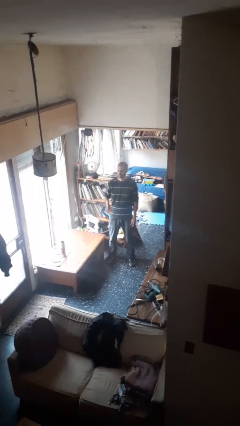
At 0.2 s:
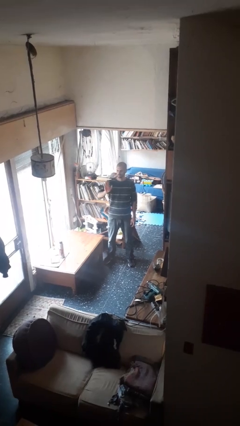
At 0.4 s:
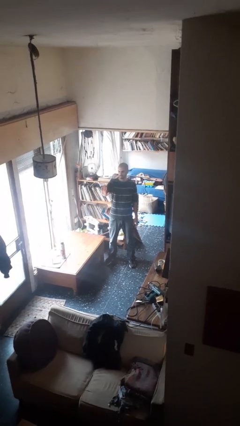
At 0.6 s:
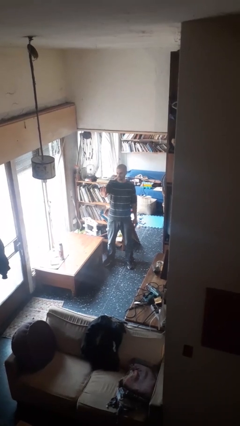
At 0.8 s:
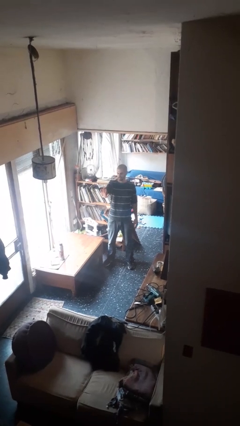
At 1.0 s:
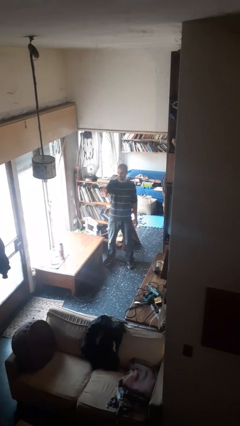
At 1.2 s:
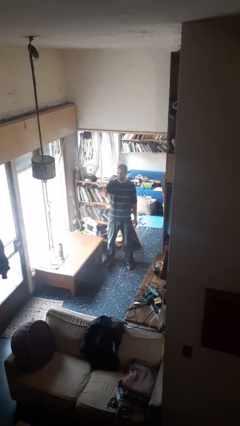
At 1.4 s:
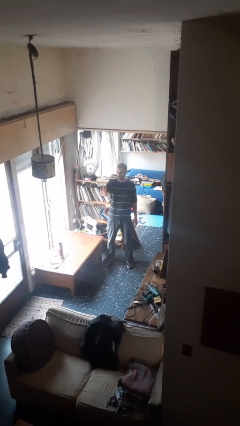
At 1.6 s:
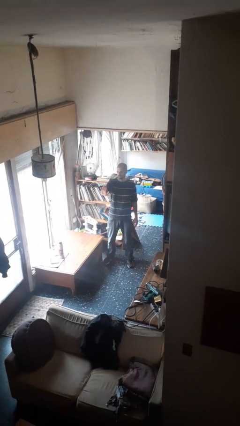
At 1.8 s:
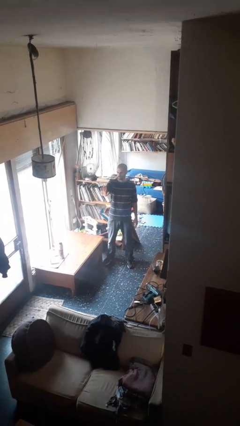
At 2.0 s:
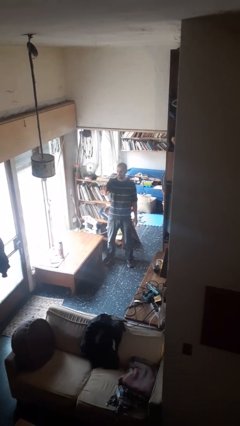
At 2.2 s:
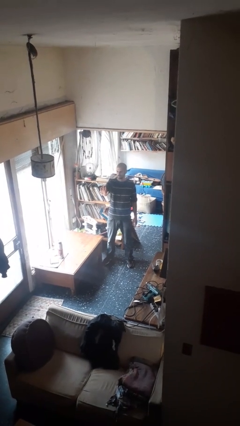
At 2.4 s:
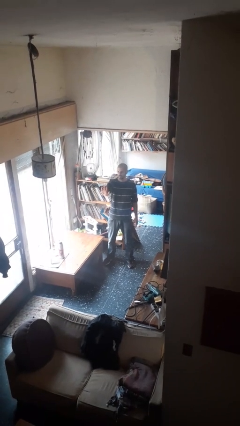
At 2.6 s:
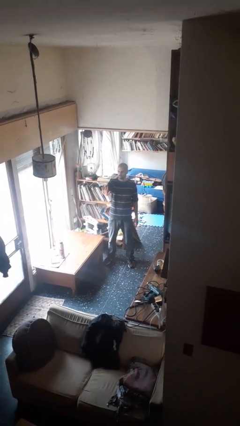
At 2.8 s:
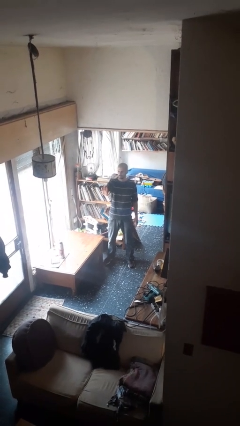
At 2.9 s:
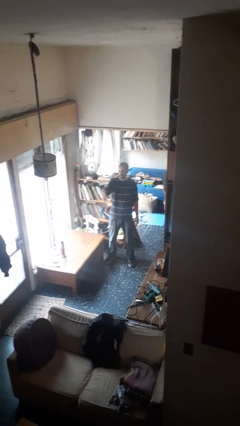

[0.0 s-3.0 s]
person gestures stop

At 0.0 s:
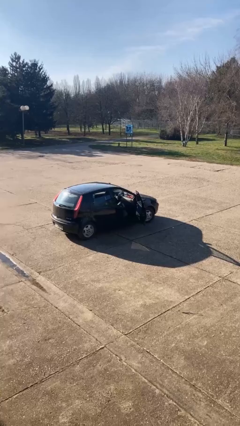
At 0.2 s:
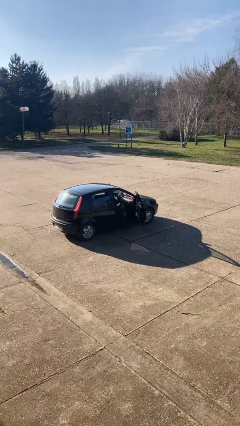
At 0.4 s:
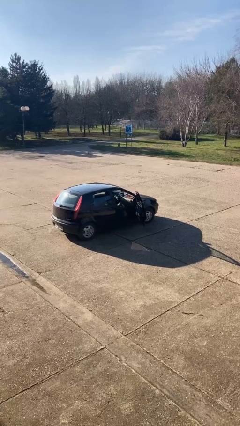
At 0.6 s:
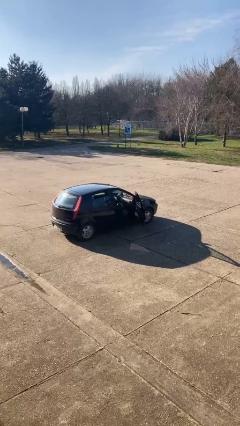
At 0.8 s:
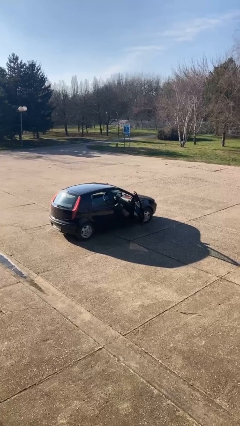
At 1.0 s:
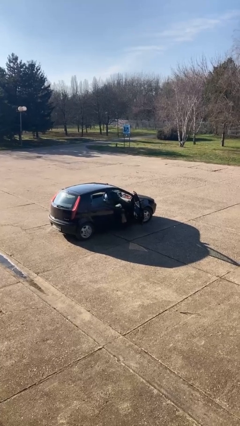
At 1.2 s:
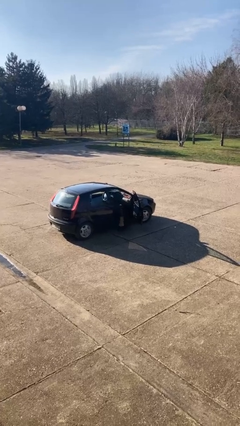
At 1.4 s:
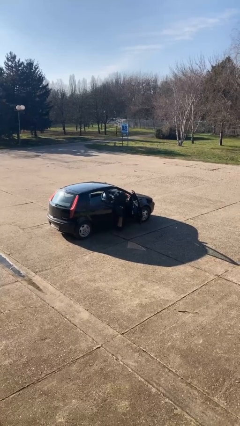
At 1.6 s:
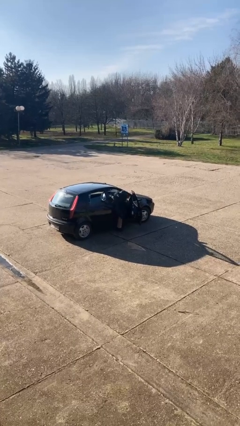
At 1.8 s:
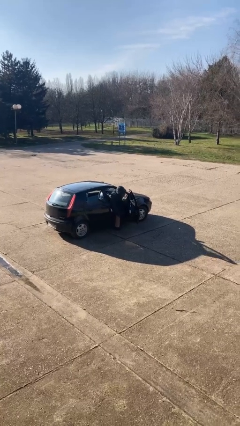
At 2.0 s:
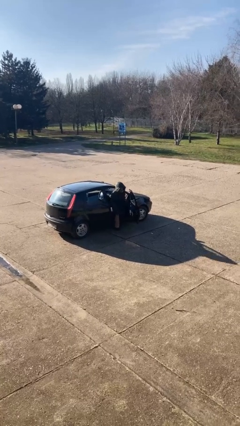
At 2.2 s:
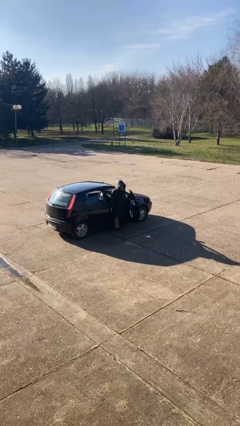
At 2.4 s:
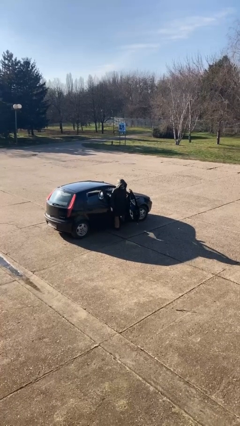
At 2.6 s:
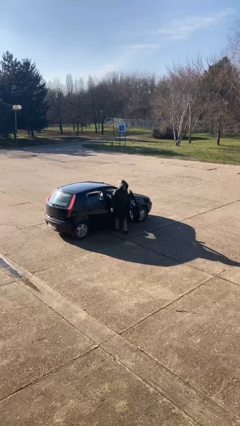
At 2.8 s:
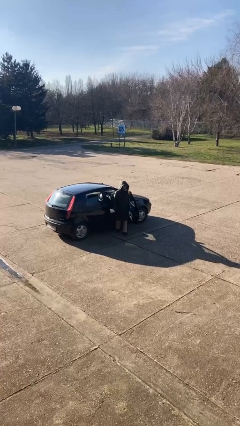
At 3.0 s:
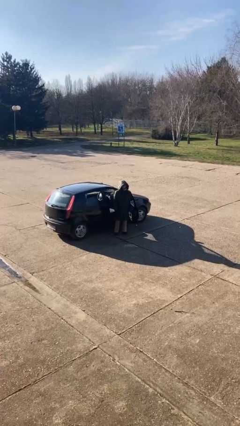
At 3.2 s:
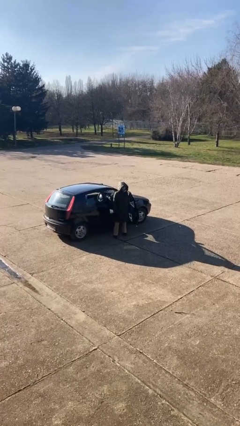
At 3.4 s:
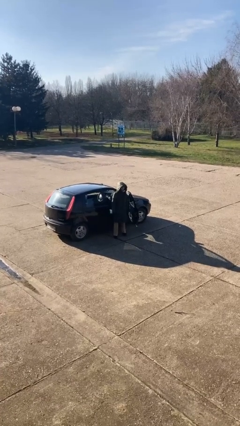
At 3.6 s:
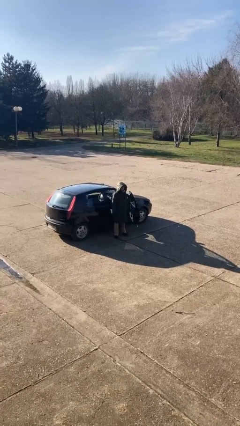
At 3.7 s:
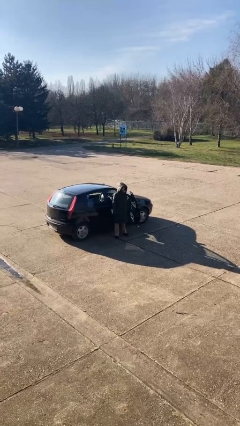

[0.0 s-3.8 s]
person exits car

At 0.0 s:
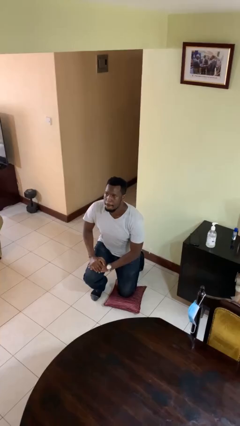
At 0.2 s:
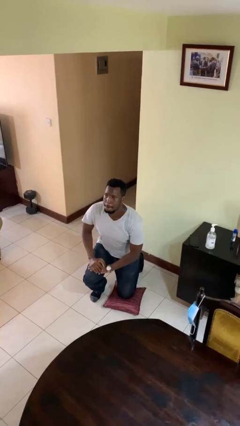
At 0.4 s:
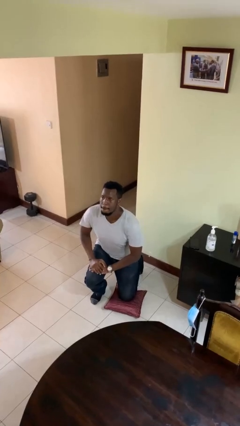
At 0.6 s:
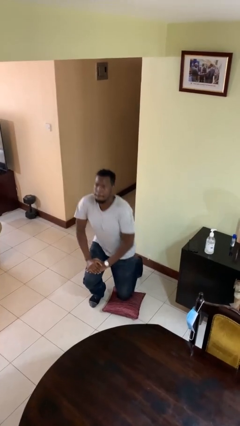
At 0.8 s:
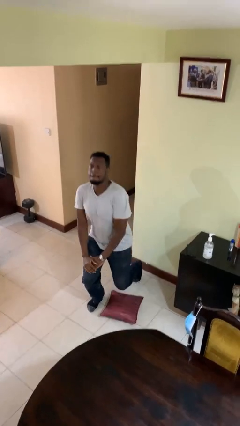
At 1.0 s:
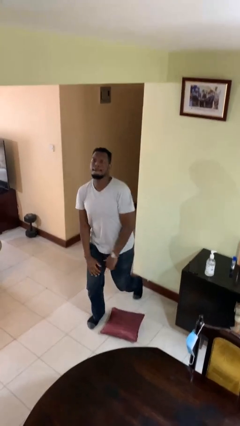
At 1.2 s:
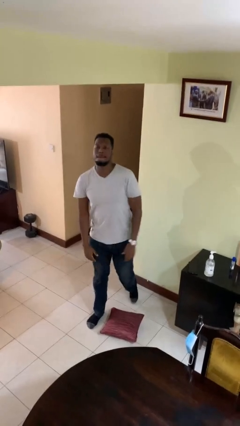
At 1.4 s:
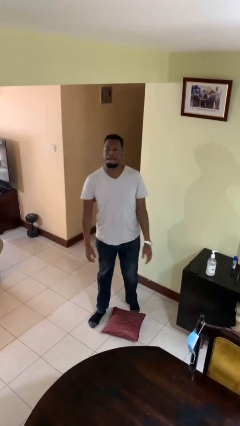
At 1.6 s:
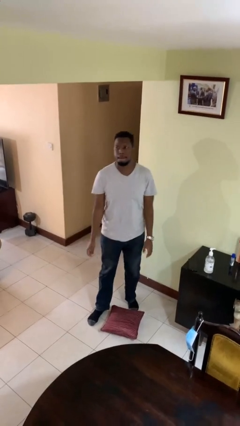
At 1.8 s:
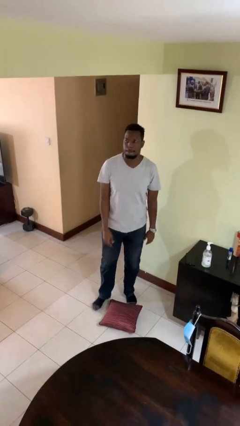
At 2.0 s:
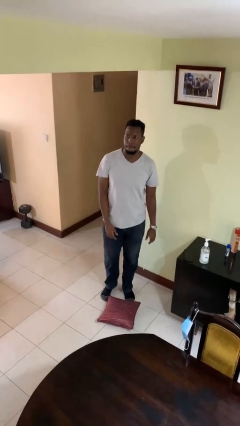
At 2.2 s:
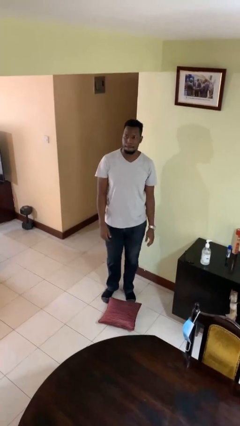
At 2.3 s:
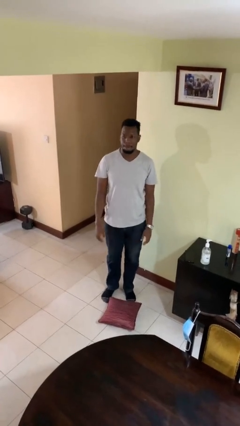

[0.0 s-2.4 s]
person stands up from floor

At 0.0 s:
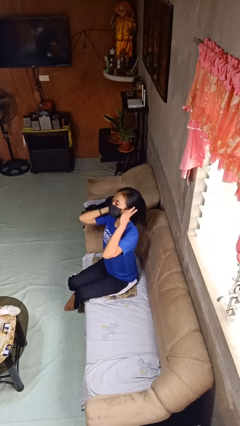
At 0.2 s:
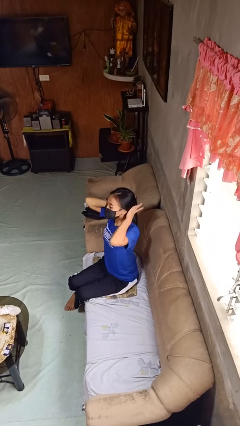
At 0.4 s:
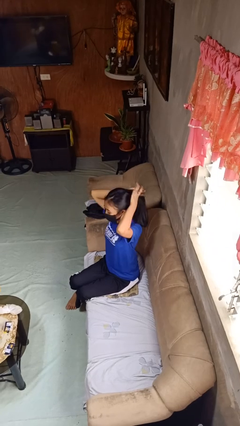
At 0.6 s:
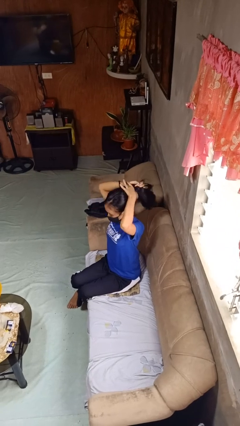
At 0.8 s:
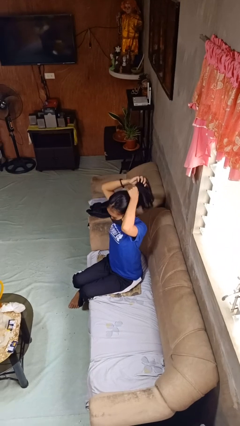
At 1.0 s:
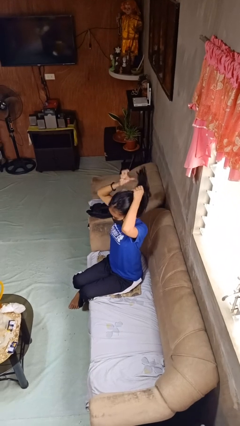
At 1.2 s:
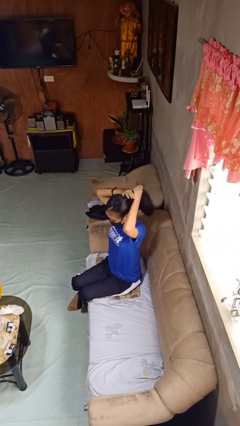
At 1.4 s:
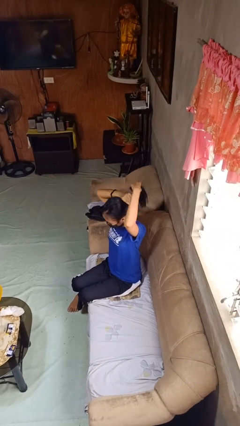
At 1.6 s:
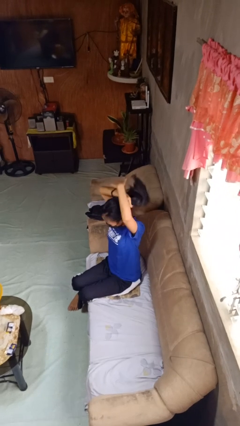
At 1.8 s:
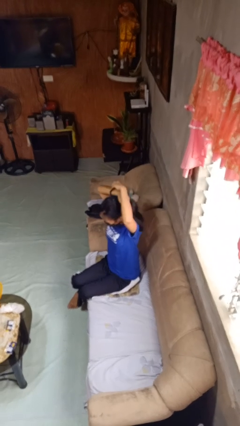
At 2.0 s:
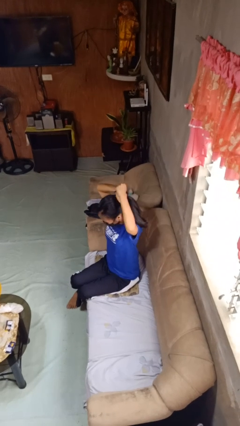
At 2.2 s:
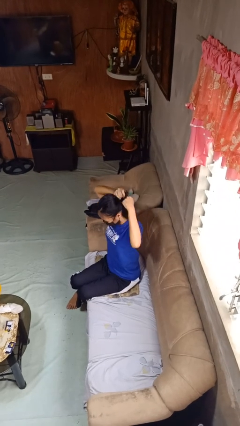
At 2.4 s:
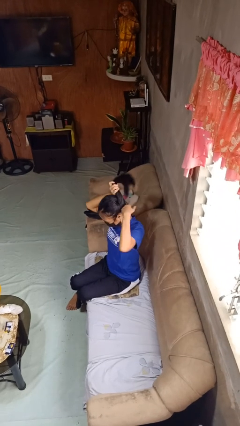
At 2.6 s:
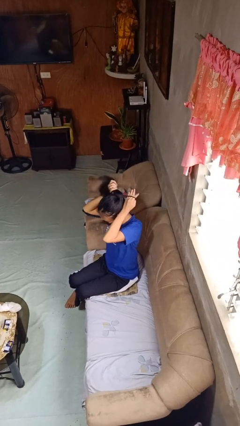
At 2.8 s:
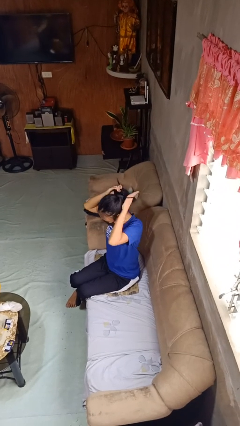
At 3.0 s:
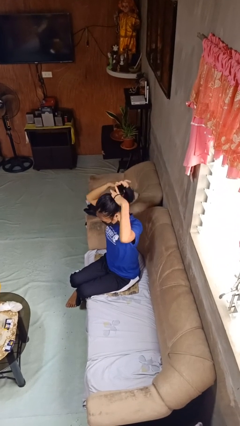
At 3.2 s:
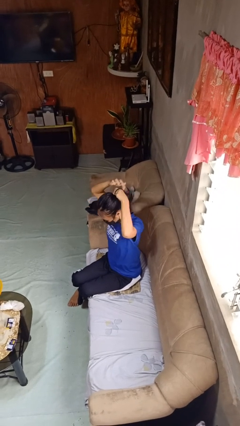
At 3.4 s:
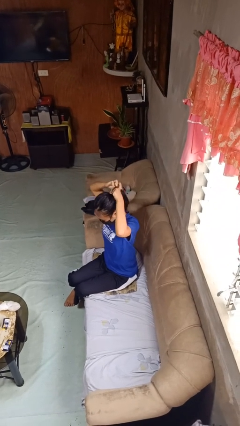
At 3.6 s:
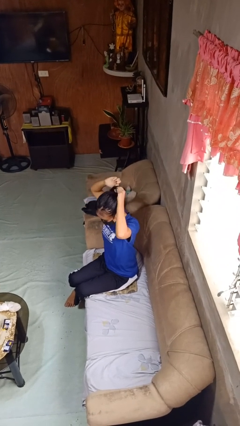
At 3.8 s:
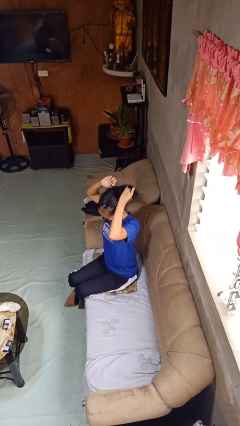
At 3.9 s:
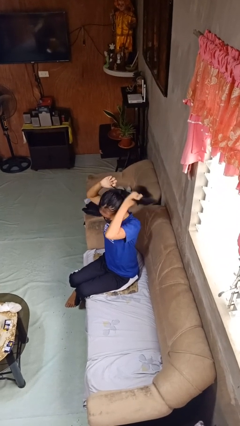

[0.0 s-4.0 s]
person puts hair in ponytail

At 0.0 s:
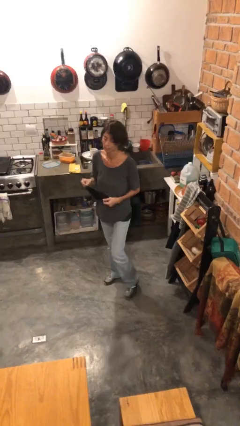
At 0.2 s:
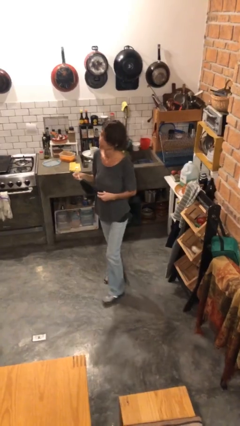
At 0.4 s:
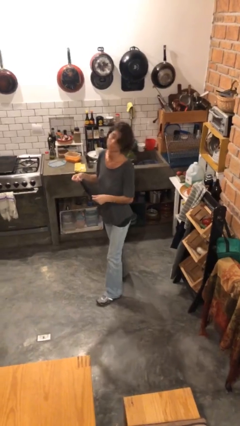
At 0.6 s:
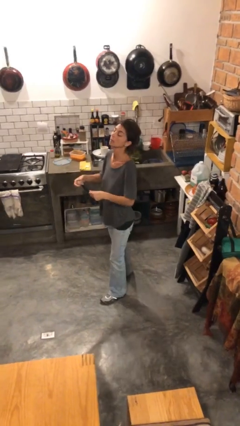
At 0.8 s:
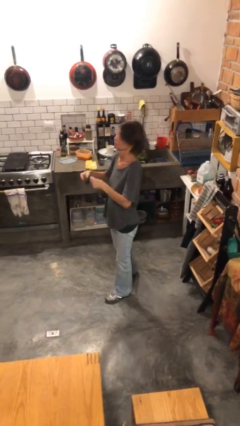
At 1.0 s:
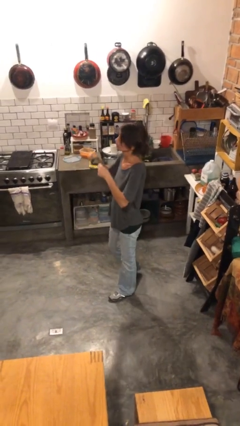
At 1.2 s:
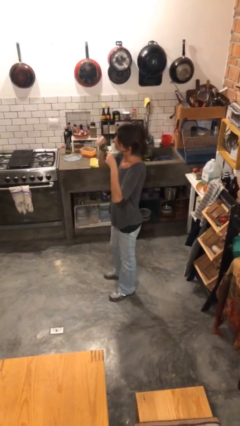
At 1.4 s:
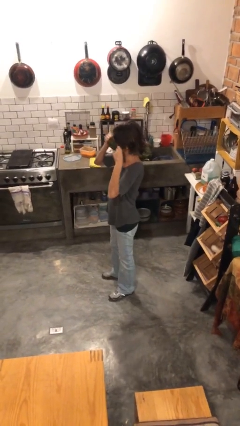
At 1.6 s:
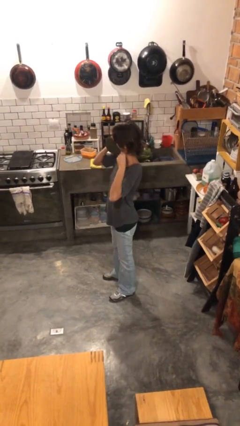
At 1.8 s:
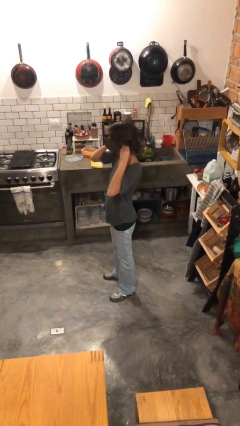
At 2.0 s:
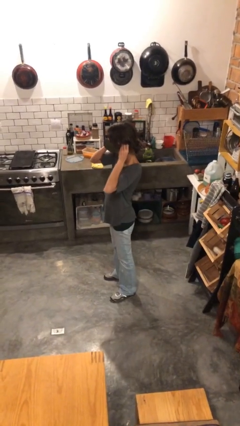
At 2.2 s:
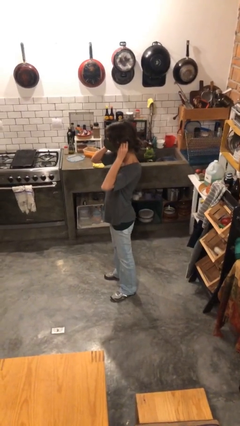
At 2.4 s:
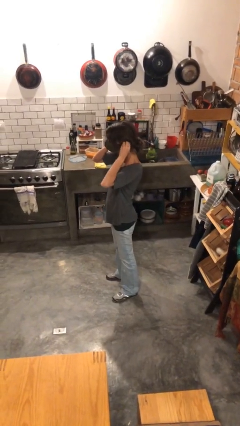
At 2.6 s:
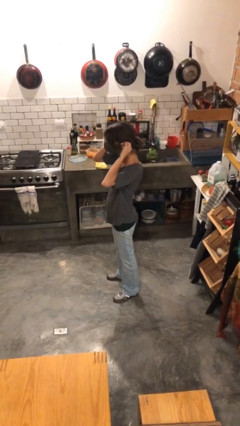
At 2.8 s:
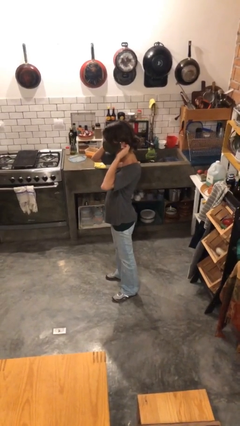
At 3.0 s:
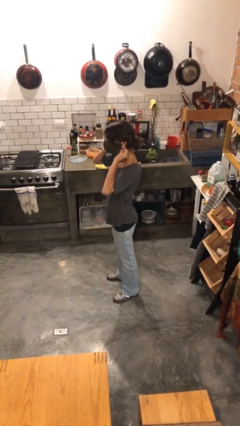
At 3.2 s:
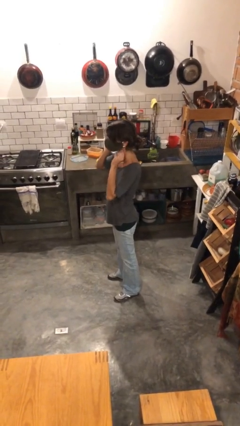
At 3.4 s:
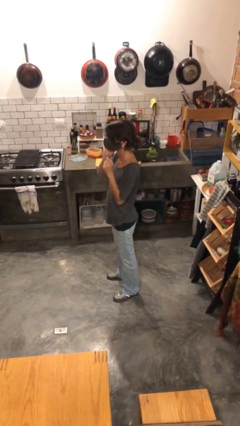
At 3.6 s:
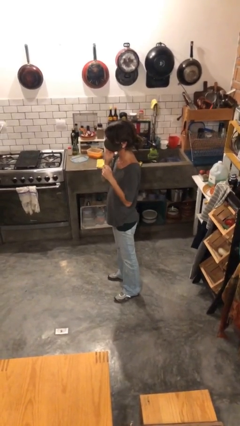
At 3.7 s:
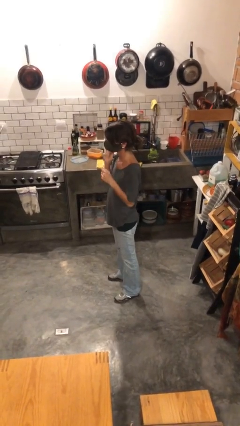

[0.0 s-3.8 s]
person puts on facemask

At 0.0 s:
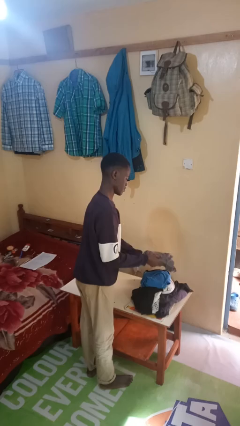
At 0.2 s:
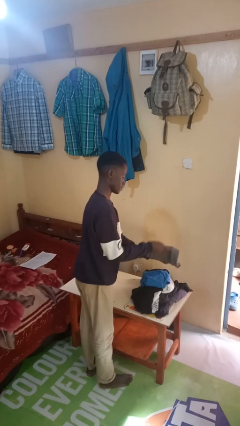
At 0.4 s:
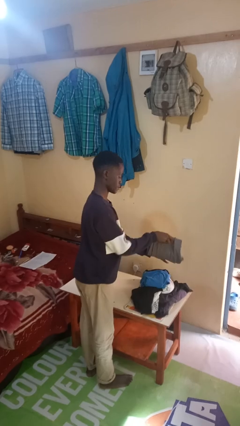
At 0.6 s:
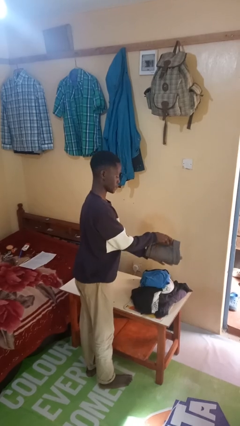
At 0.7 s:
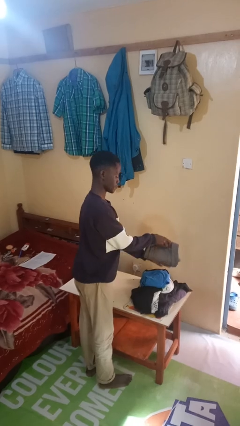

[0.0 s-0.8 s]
person folds pants
